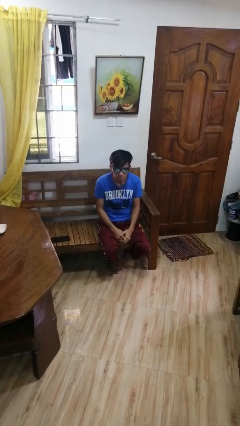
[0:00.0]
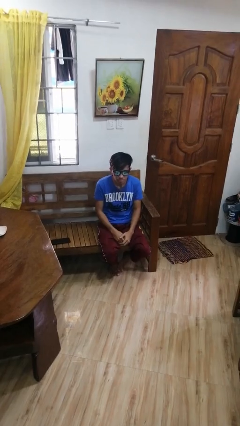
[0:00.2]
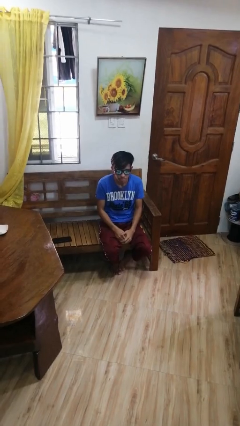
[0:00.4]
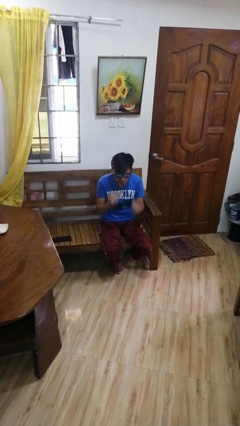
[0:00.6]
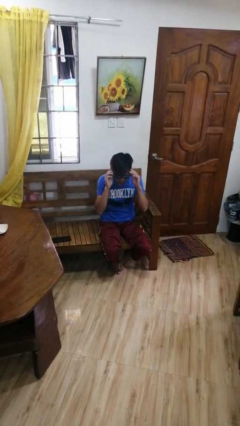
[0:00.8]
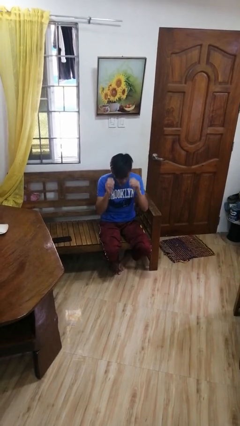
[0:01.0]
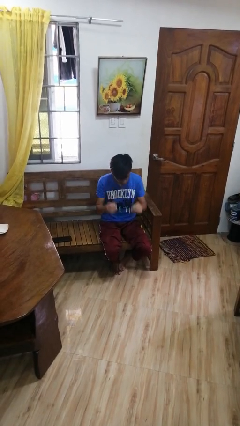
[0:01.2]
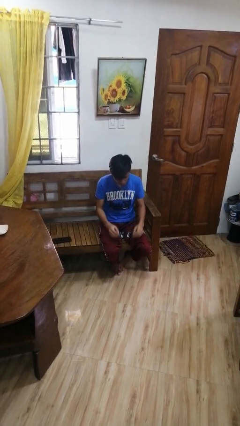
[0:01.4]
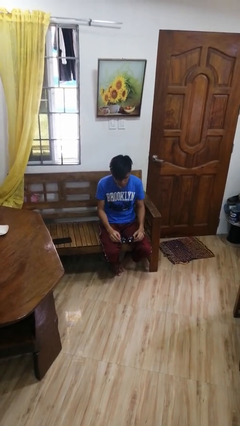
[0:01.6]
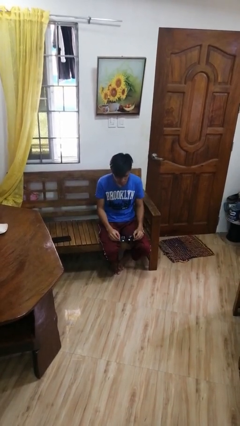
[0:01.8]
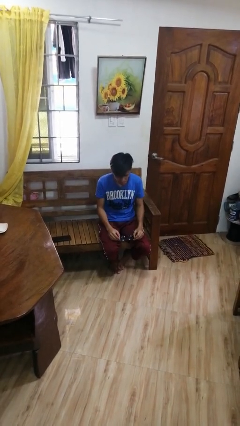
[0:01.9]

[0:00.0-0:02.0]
person takes off sunglasses

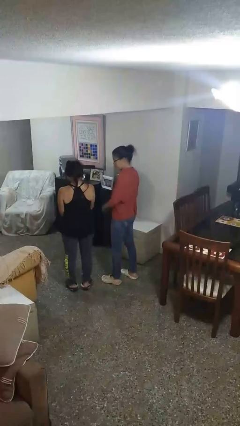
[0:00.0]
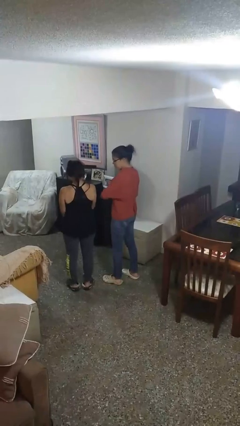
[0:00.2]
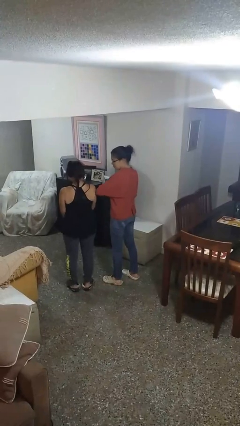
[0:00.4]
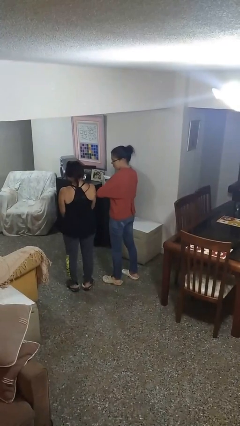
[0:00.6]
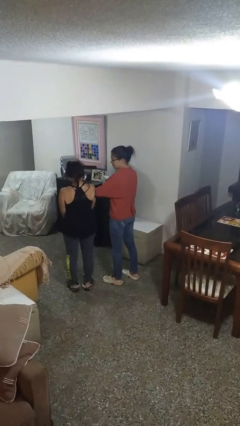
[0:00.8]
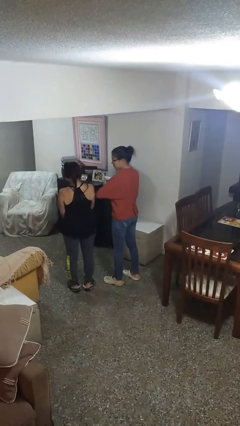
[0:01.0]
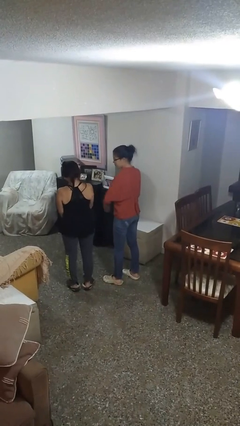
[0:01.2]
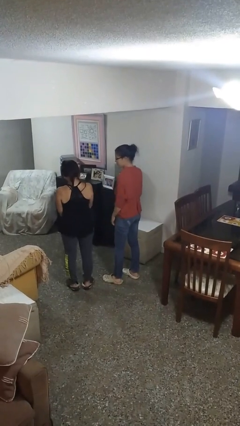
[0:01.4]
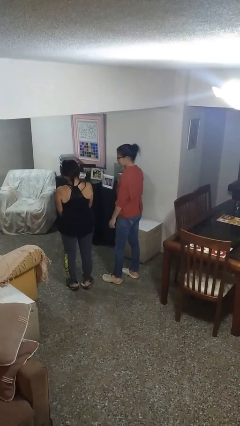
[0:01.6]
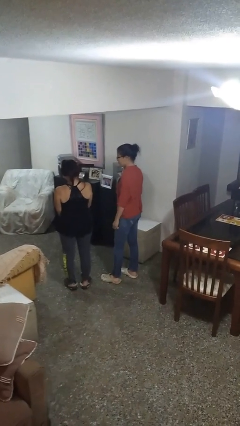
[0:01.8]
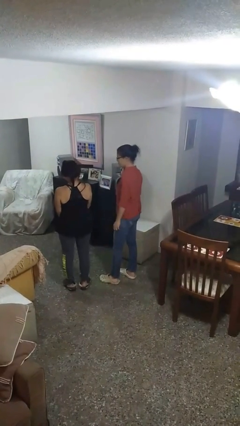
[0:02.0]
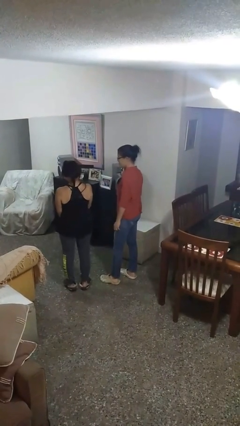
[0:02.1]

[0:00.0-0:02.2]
person nudges person with elbow

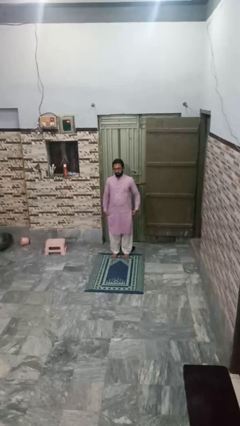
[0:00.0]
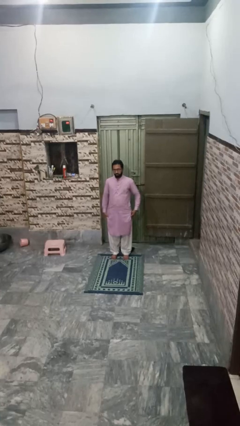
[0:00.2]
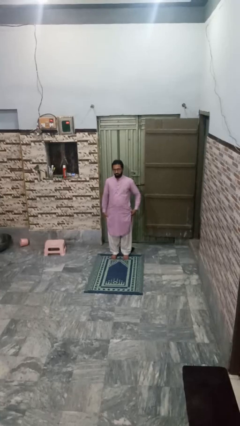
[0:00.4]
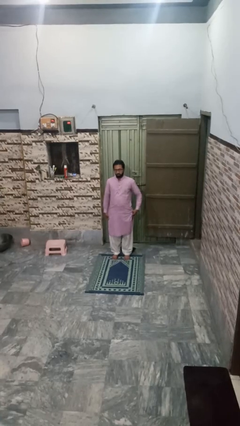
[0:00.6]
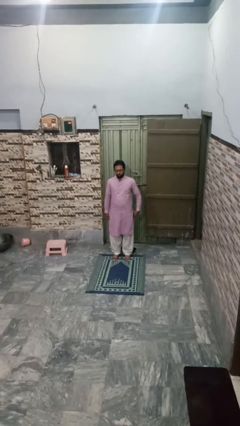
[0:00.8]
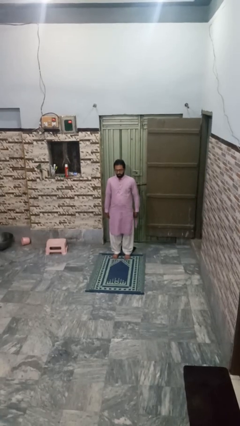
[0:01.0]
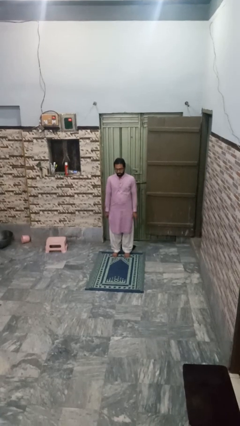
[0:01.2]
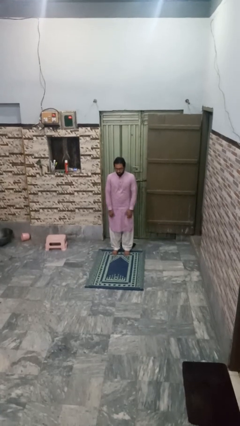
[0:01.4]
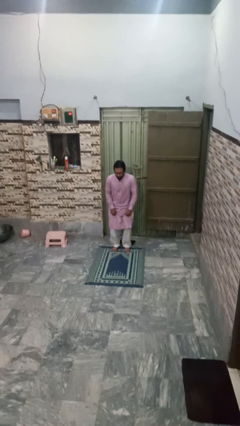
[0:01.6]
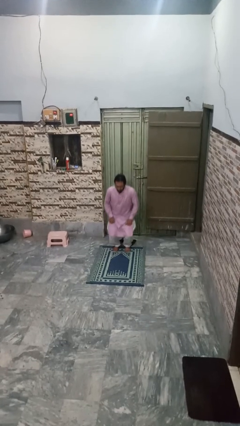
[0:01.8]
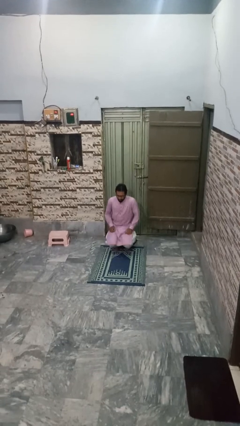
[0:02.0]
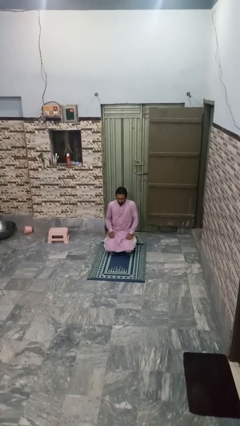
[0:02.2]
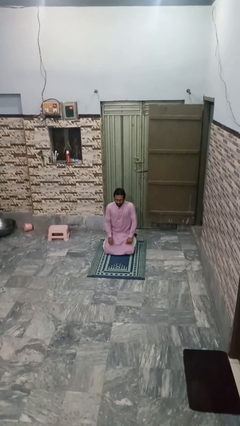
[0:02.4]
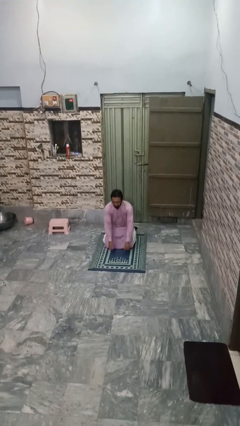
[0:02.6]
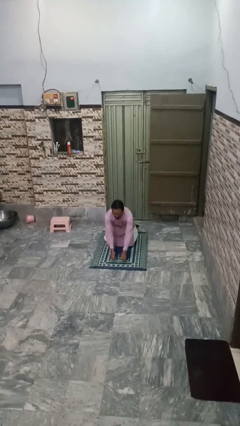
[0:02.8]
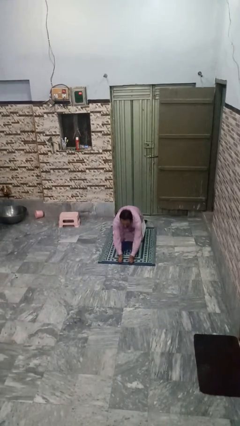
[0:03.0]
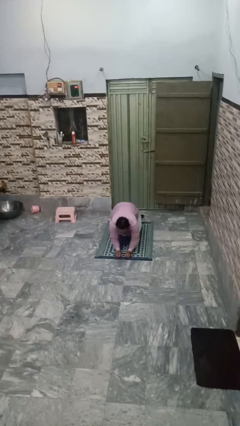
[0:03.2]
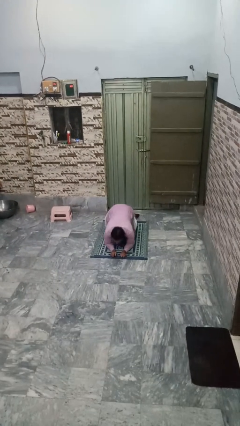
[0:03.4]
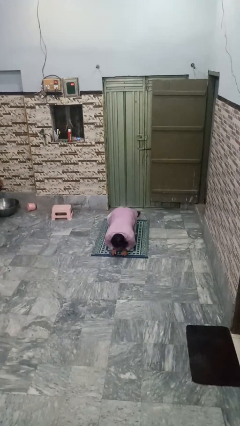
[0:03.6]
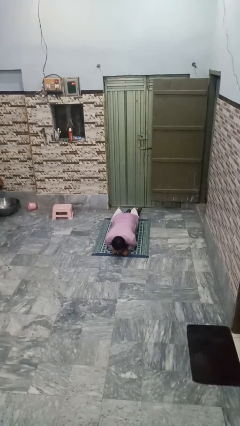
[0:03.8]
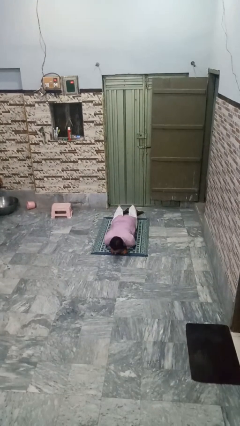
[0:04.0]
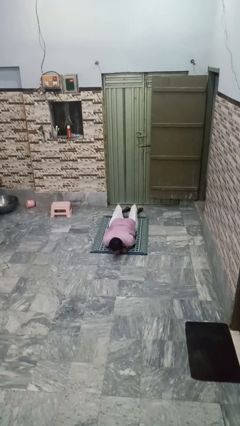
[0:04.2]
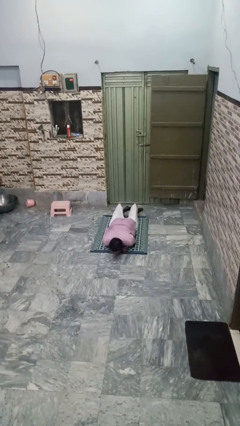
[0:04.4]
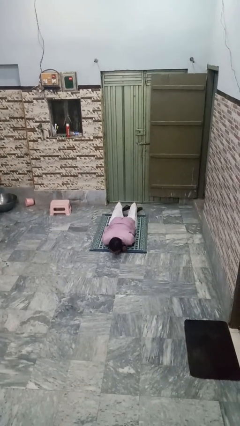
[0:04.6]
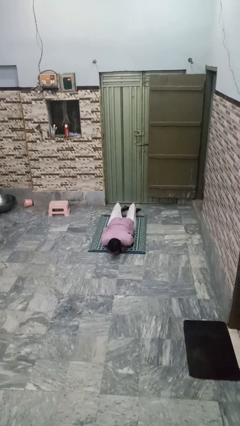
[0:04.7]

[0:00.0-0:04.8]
person exercises with plank

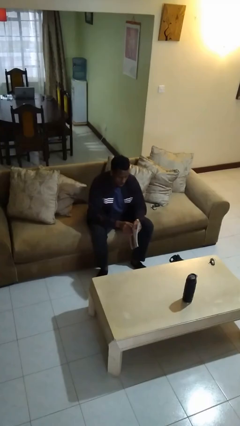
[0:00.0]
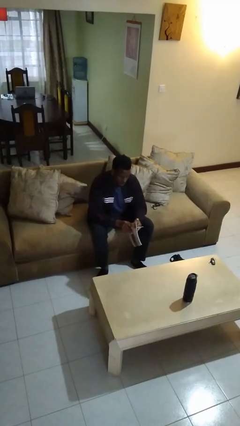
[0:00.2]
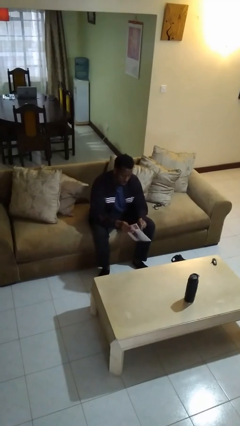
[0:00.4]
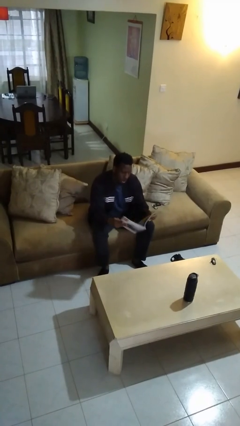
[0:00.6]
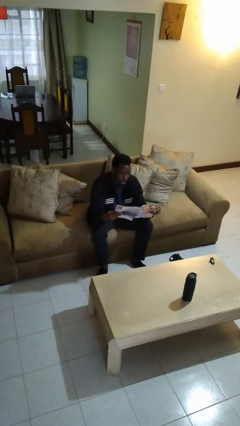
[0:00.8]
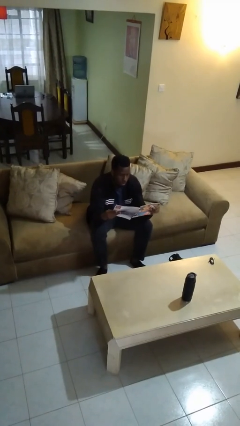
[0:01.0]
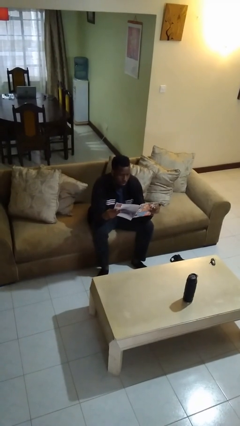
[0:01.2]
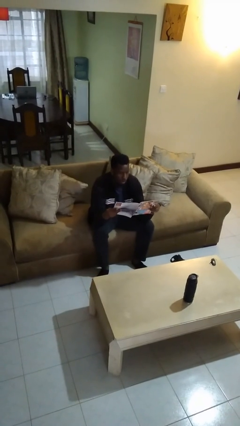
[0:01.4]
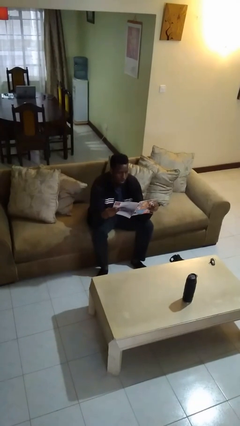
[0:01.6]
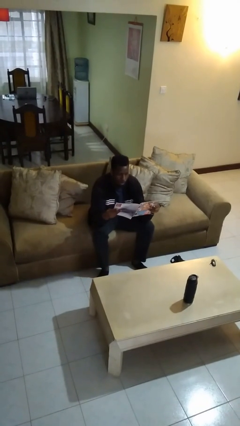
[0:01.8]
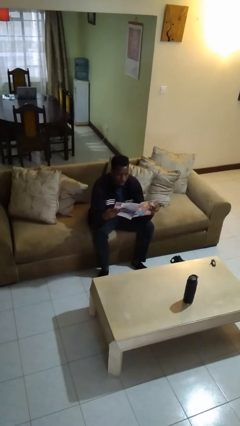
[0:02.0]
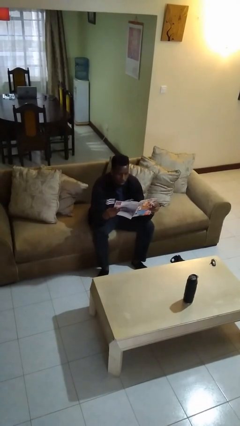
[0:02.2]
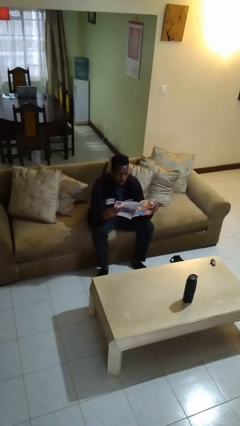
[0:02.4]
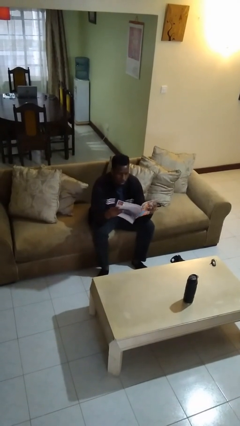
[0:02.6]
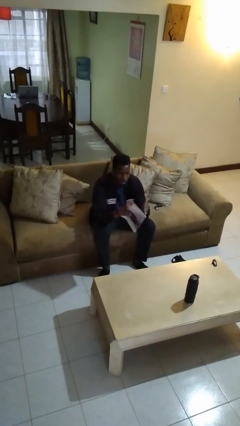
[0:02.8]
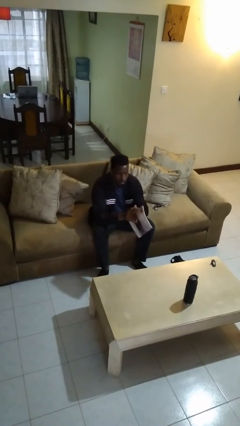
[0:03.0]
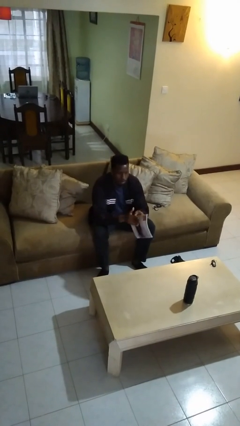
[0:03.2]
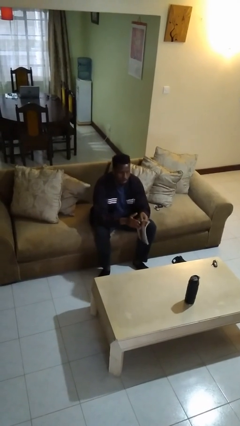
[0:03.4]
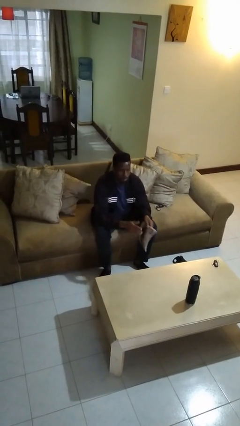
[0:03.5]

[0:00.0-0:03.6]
person reads magazine

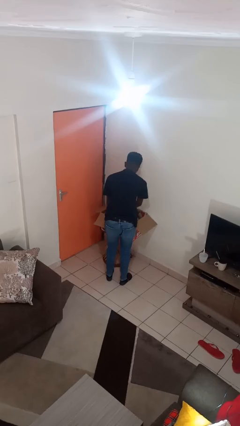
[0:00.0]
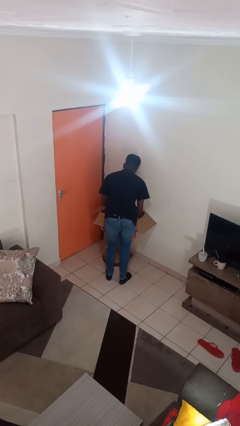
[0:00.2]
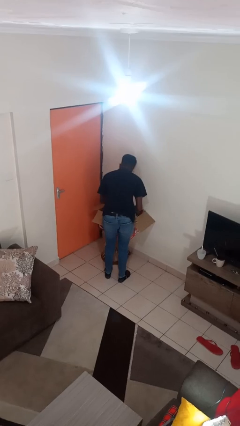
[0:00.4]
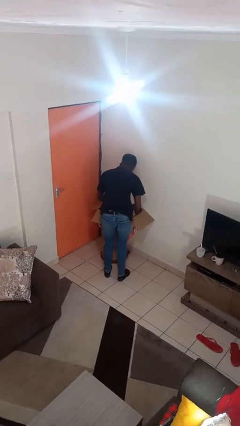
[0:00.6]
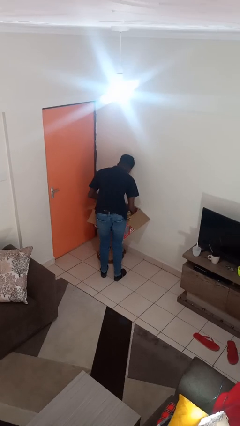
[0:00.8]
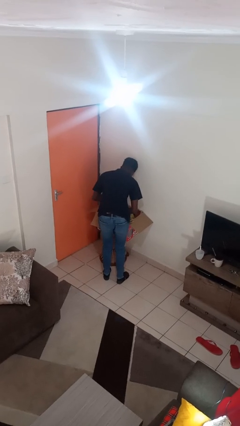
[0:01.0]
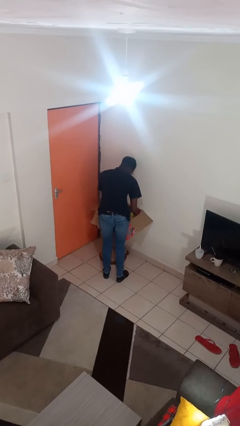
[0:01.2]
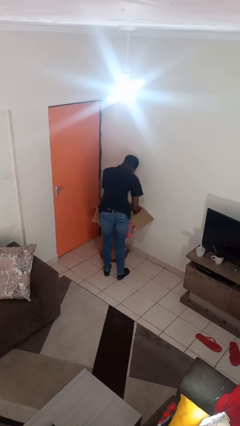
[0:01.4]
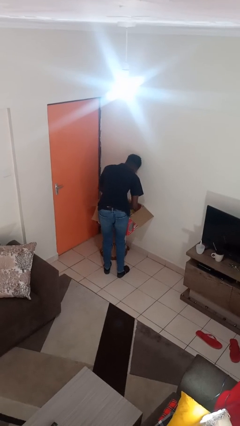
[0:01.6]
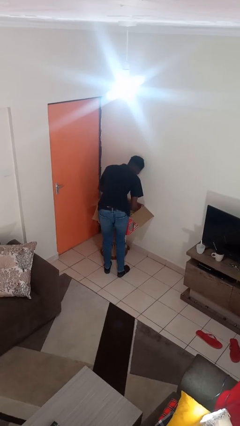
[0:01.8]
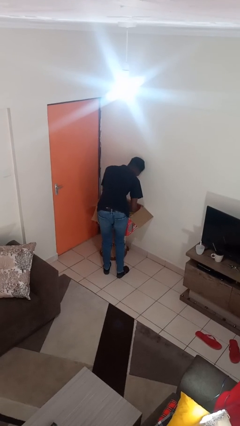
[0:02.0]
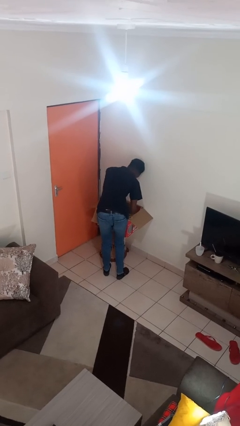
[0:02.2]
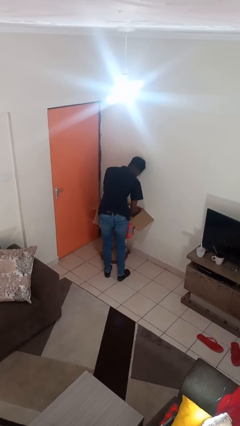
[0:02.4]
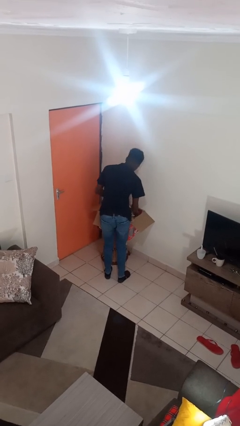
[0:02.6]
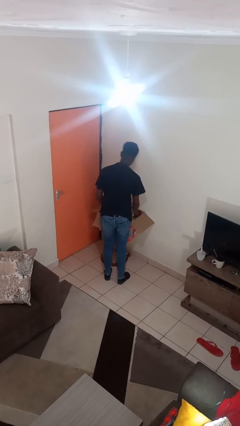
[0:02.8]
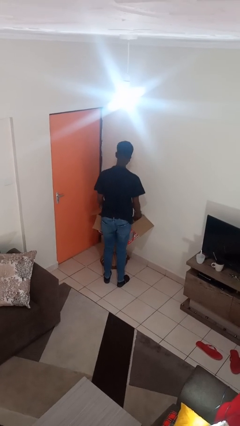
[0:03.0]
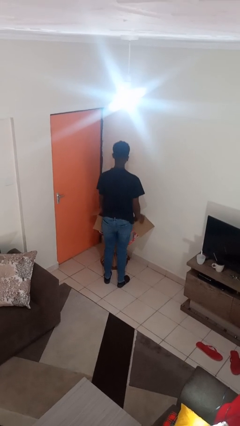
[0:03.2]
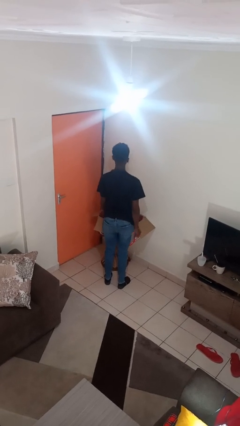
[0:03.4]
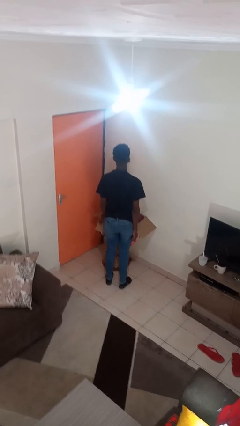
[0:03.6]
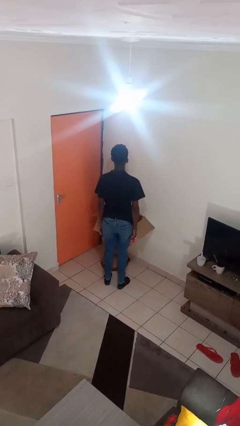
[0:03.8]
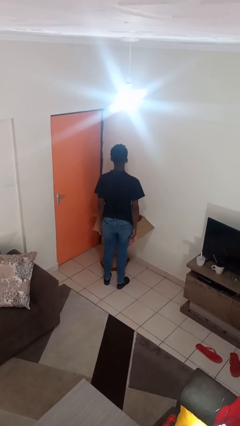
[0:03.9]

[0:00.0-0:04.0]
person searches in box

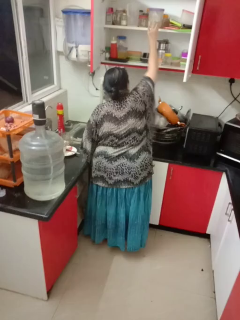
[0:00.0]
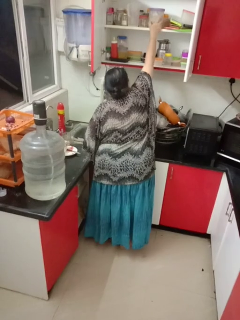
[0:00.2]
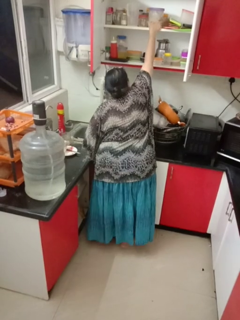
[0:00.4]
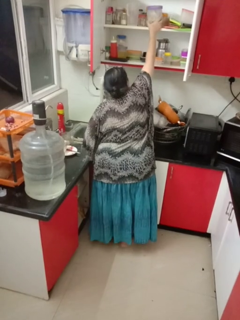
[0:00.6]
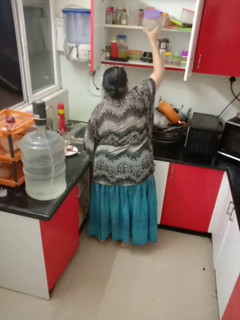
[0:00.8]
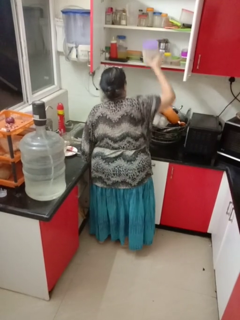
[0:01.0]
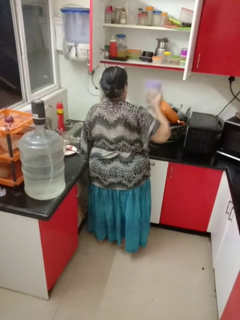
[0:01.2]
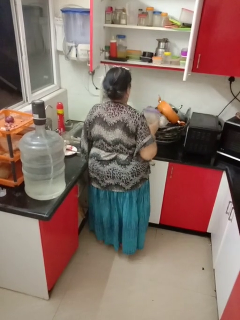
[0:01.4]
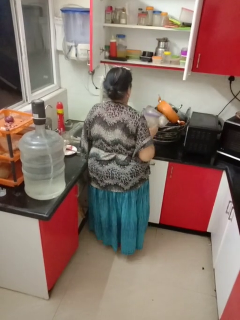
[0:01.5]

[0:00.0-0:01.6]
person takes object from cabinet
